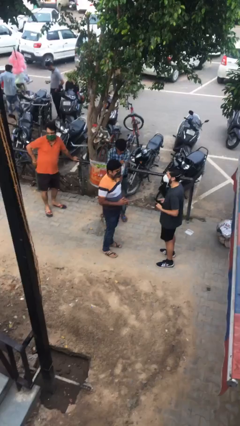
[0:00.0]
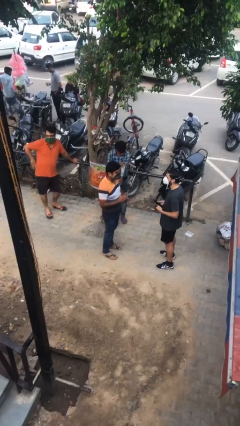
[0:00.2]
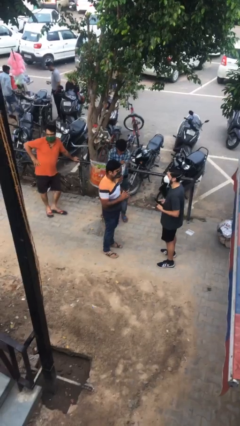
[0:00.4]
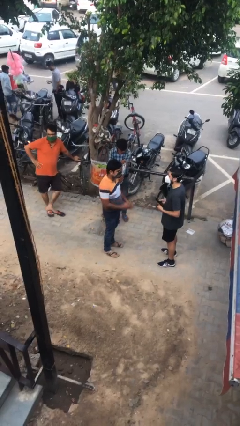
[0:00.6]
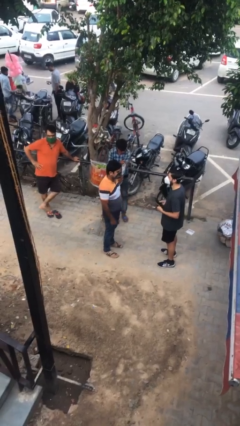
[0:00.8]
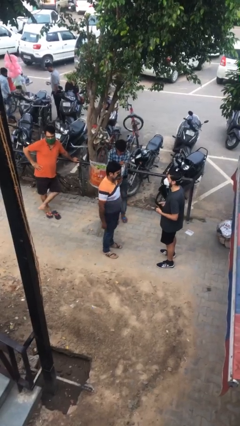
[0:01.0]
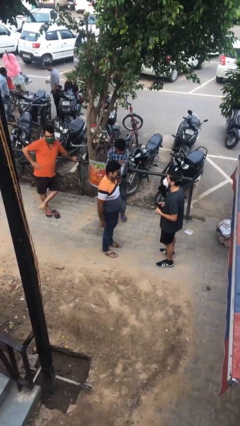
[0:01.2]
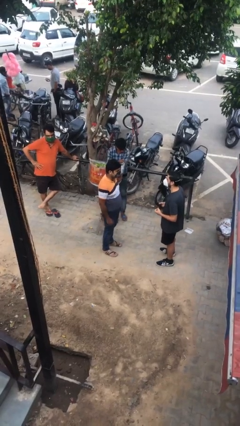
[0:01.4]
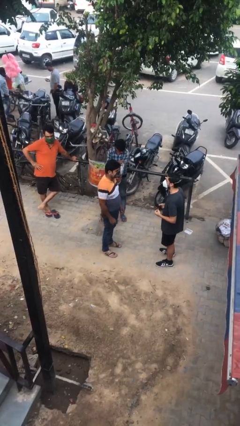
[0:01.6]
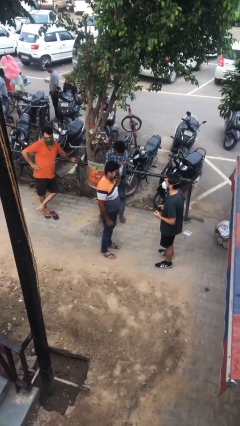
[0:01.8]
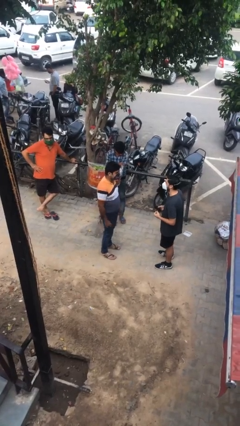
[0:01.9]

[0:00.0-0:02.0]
person talks to person

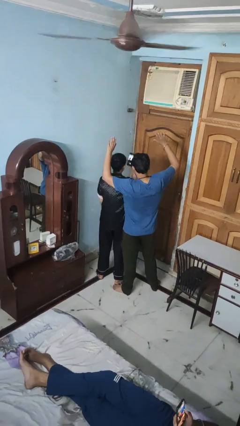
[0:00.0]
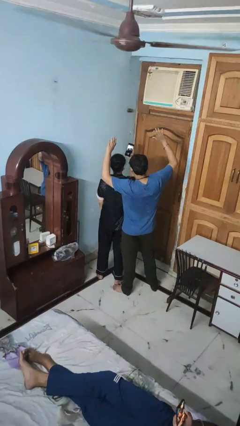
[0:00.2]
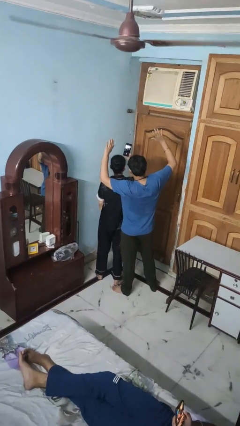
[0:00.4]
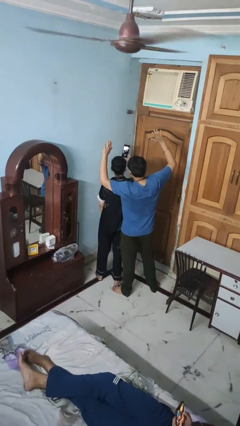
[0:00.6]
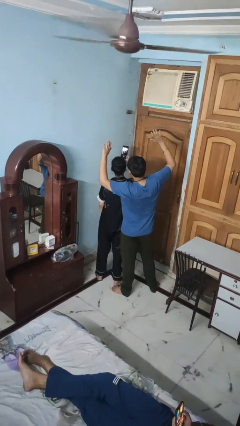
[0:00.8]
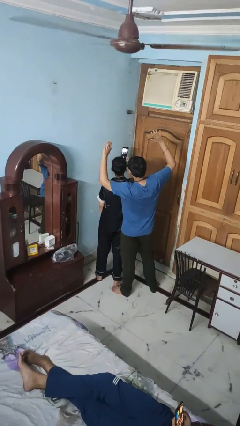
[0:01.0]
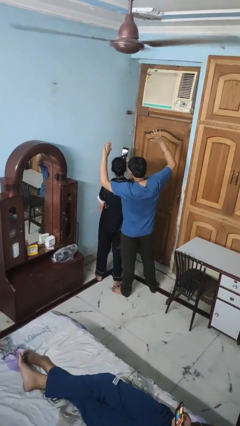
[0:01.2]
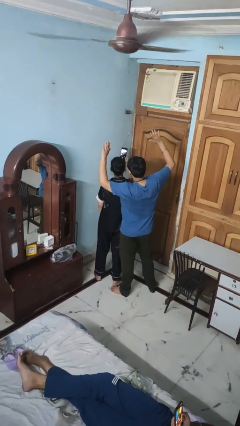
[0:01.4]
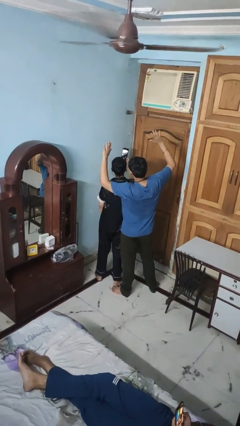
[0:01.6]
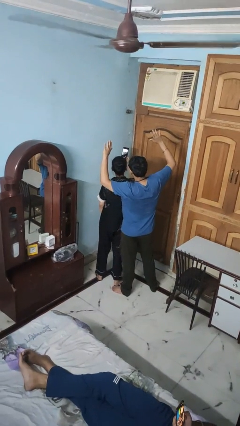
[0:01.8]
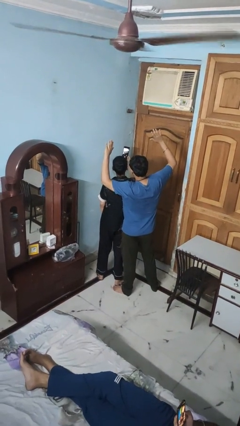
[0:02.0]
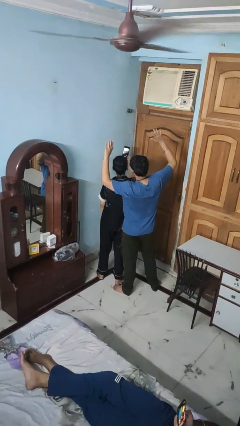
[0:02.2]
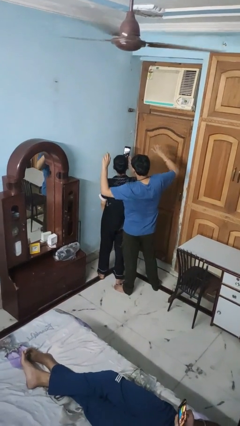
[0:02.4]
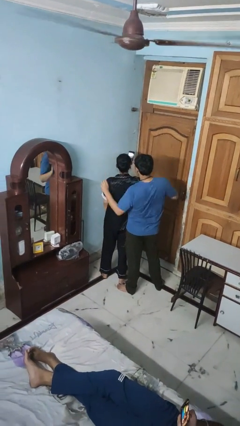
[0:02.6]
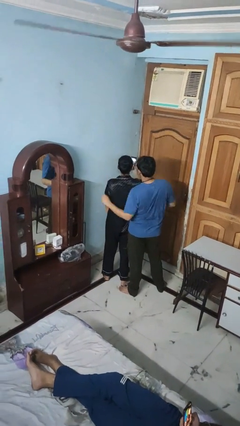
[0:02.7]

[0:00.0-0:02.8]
person takes selfie with person

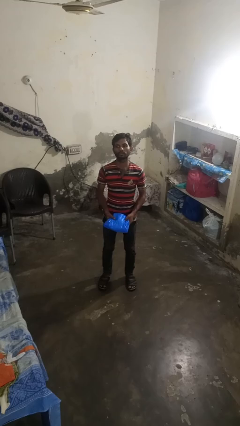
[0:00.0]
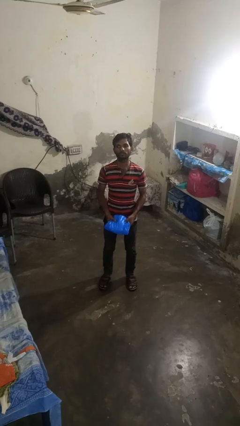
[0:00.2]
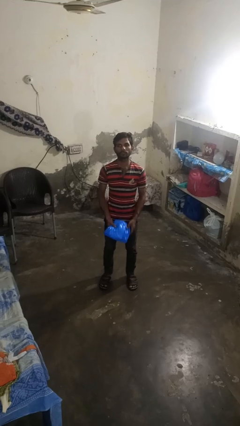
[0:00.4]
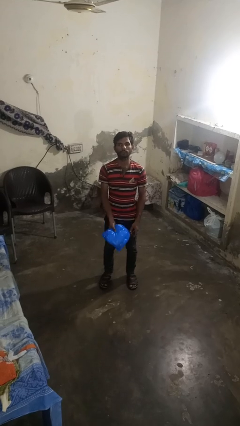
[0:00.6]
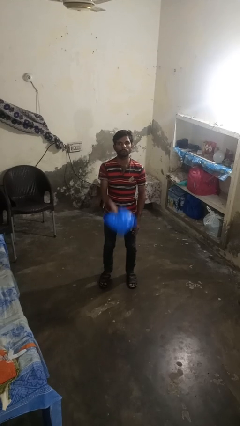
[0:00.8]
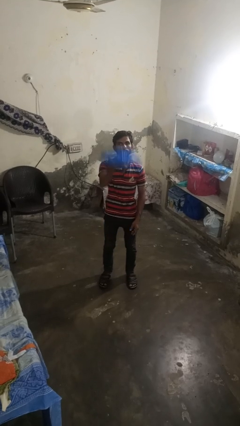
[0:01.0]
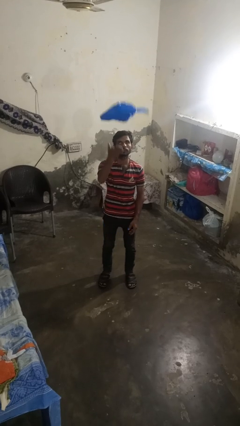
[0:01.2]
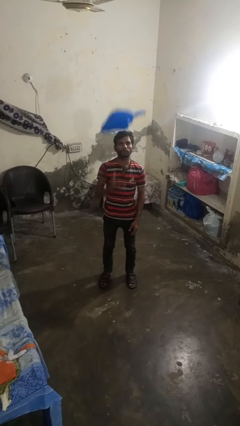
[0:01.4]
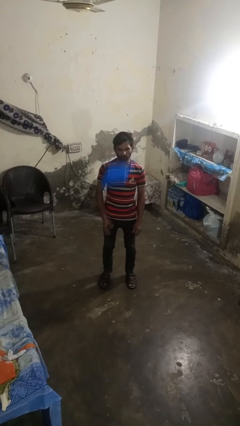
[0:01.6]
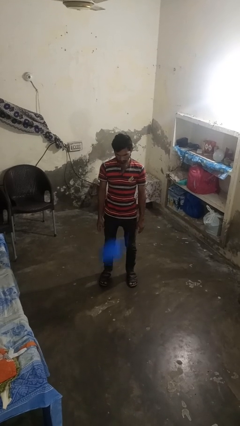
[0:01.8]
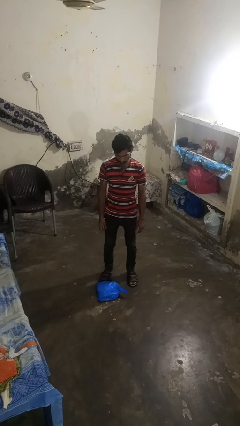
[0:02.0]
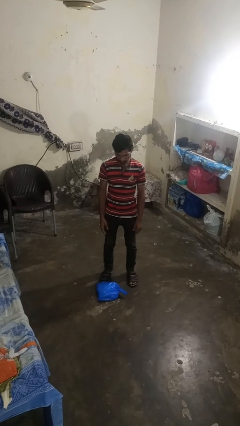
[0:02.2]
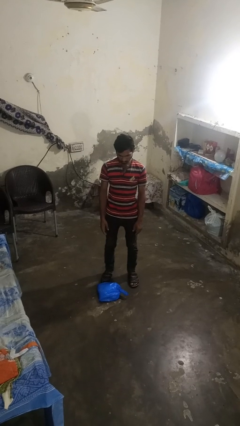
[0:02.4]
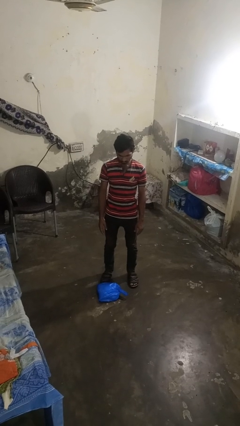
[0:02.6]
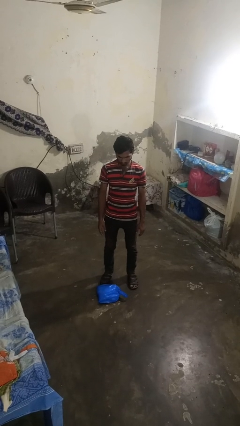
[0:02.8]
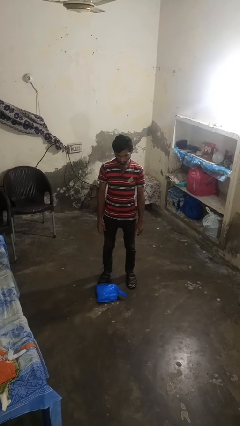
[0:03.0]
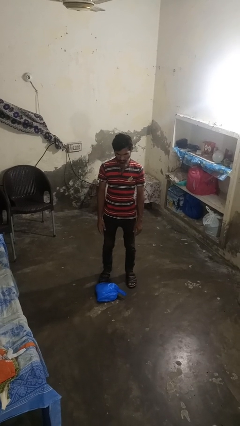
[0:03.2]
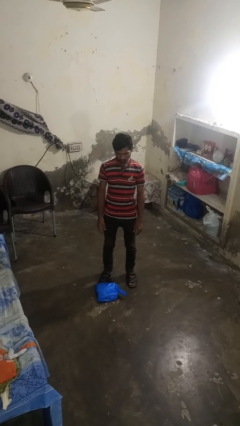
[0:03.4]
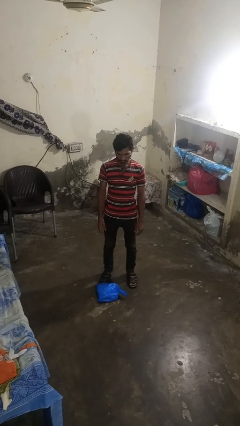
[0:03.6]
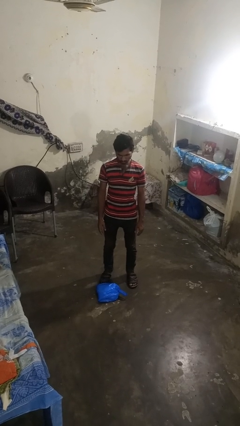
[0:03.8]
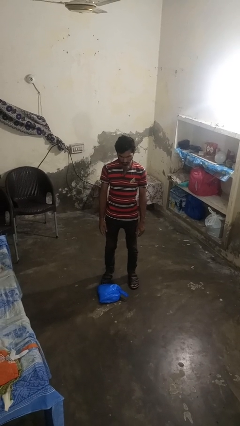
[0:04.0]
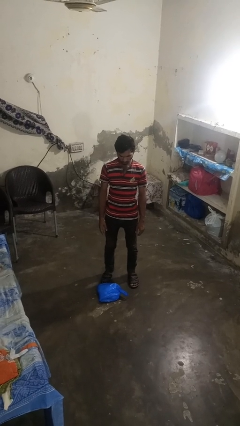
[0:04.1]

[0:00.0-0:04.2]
person throws object into air

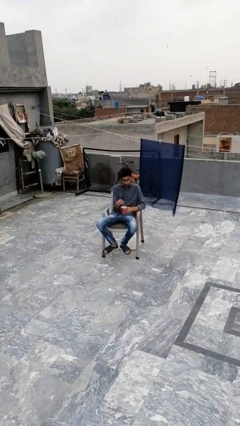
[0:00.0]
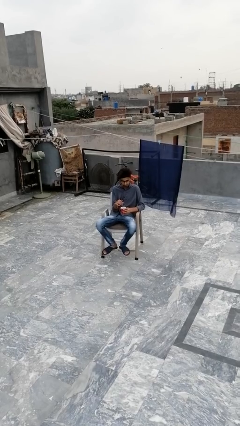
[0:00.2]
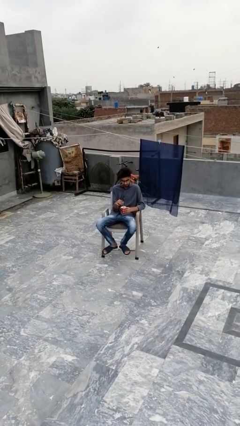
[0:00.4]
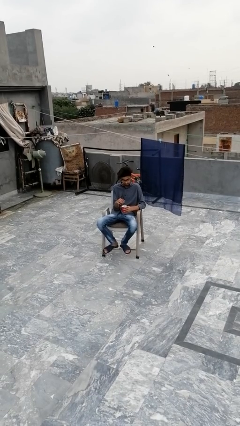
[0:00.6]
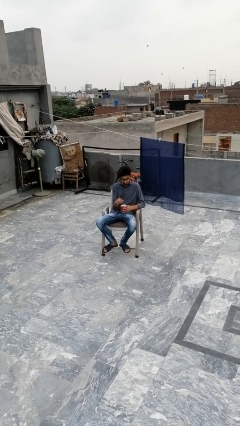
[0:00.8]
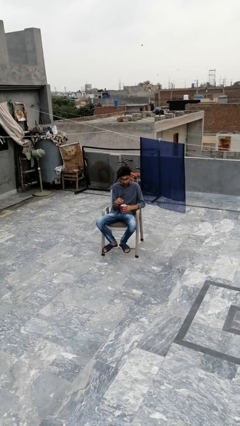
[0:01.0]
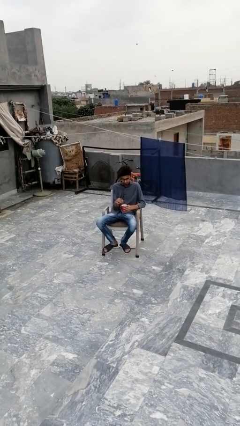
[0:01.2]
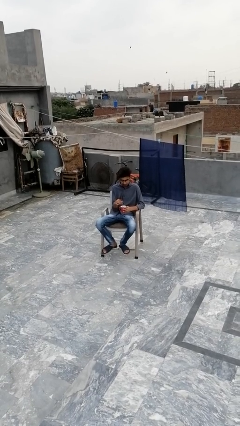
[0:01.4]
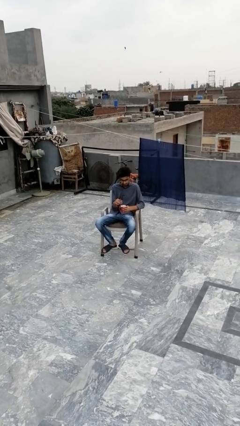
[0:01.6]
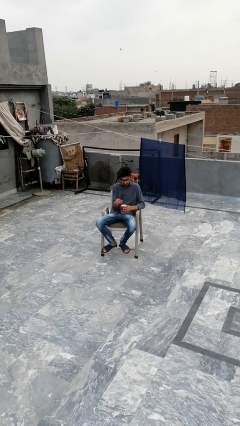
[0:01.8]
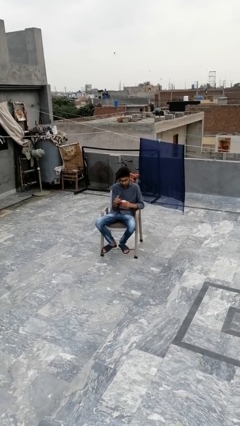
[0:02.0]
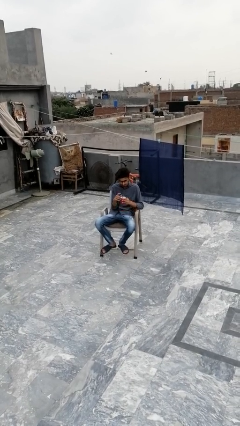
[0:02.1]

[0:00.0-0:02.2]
person stirs mug

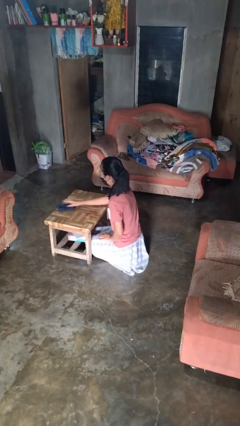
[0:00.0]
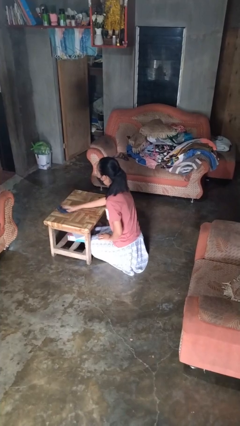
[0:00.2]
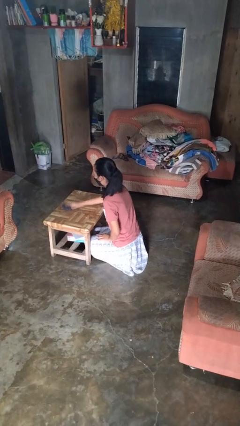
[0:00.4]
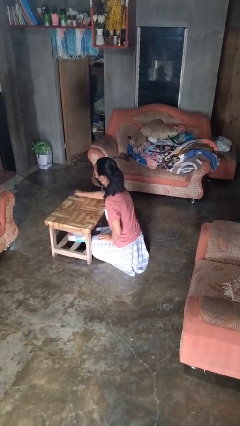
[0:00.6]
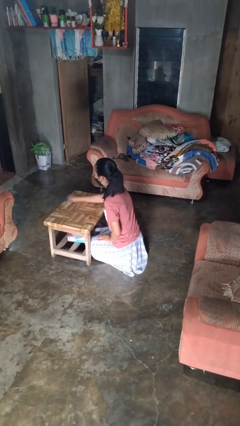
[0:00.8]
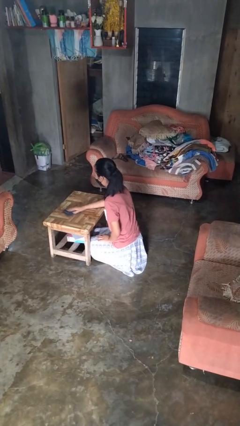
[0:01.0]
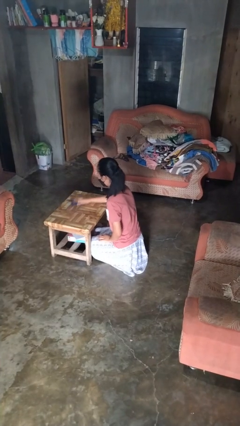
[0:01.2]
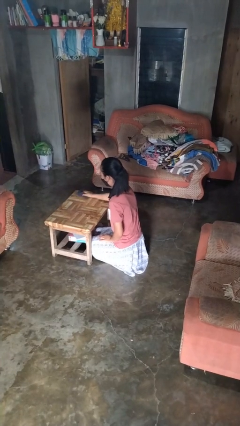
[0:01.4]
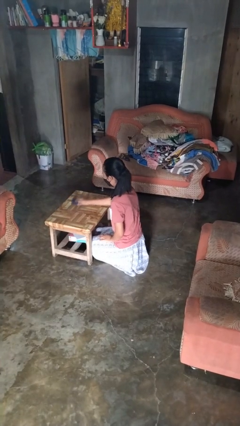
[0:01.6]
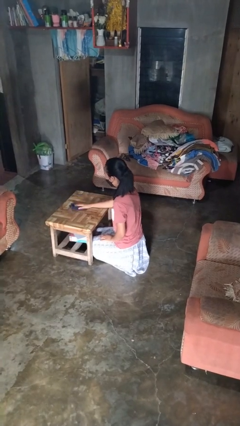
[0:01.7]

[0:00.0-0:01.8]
person cleans table with rag

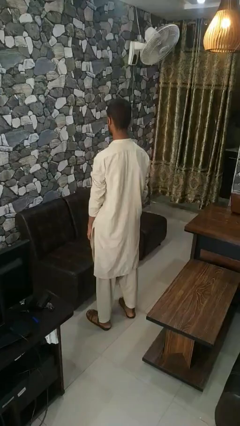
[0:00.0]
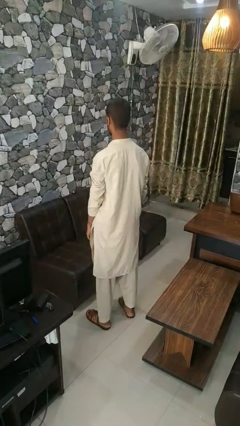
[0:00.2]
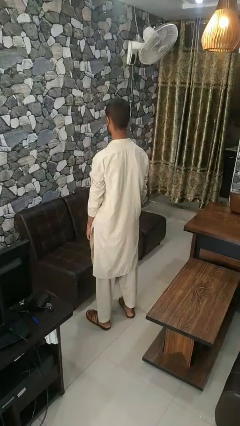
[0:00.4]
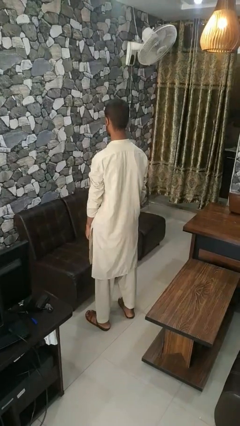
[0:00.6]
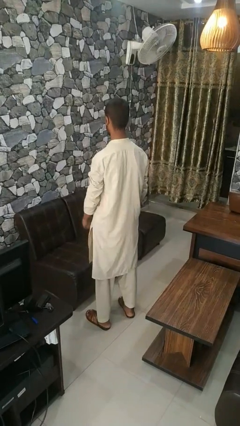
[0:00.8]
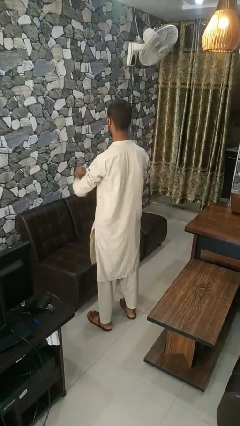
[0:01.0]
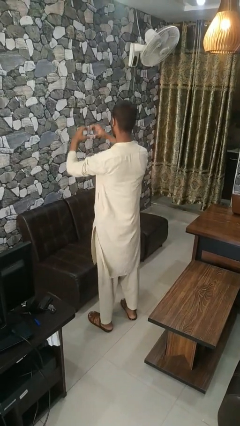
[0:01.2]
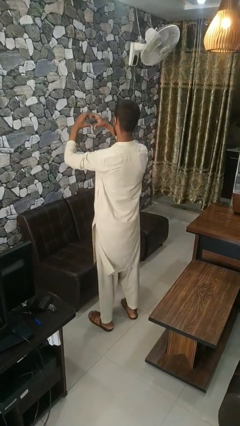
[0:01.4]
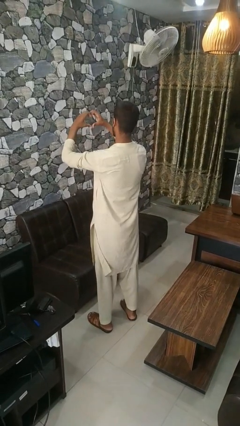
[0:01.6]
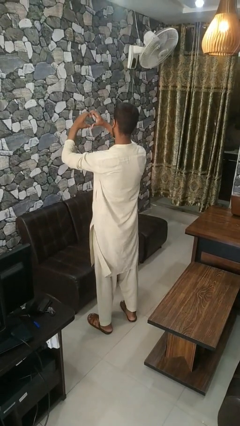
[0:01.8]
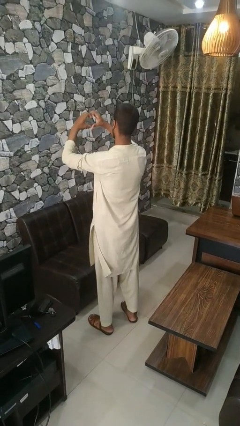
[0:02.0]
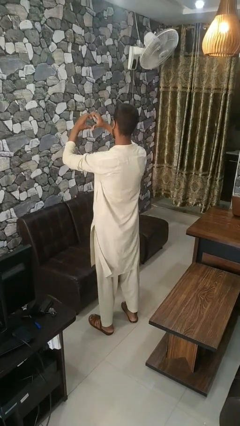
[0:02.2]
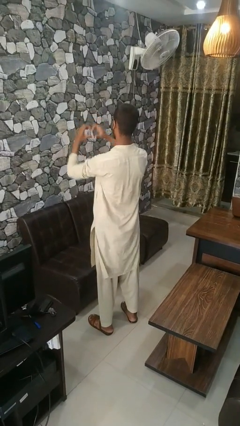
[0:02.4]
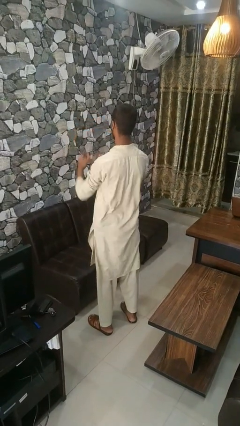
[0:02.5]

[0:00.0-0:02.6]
person gestures heart

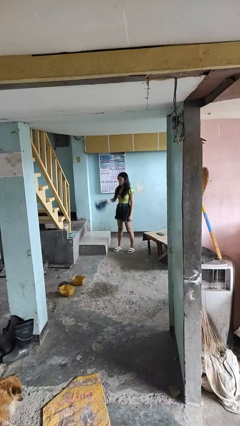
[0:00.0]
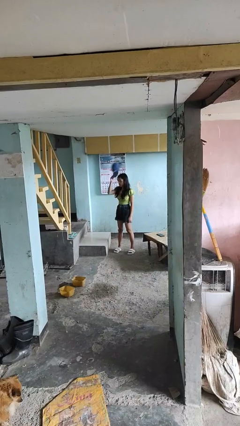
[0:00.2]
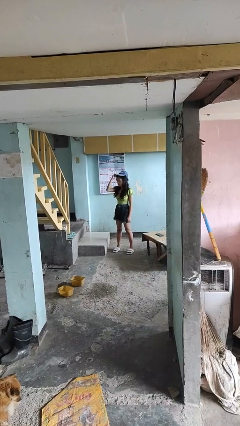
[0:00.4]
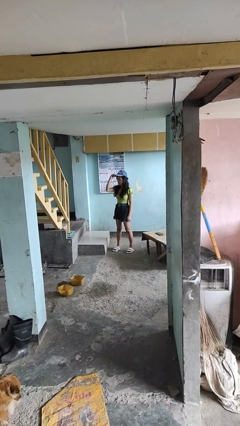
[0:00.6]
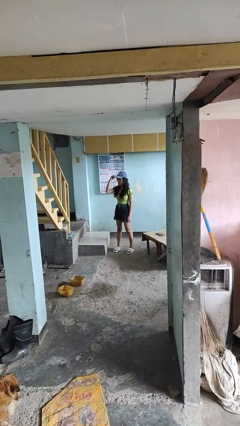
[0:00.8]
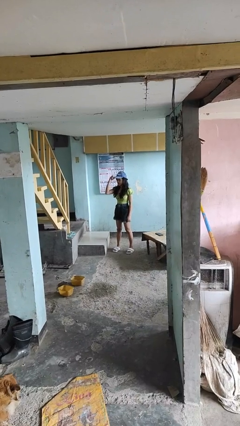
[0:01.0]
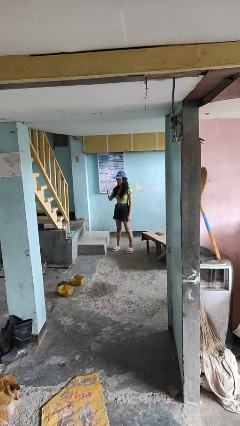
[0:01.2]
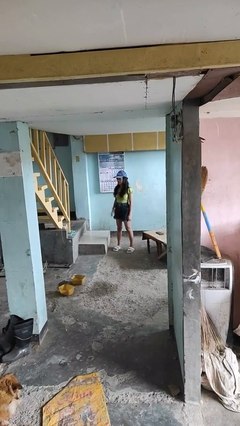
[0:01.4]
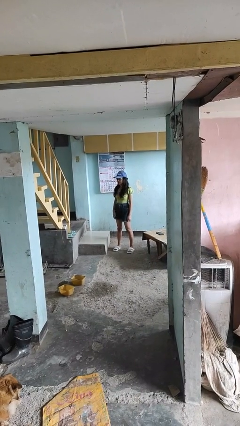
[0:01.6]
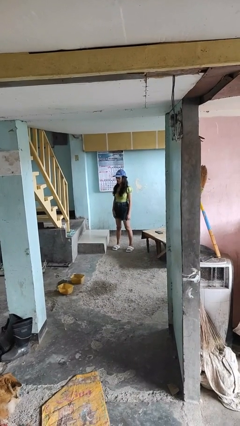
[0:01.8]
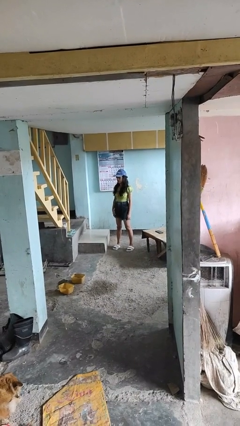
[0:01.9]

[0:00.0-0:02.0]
person puts on hat
